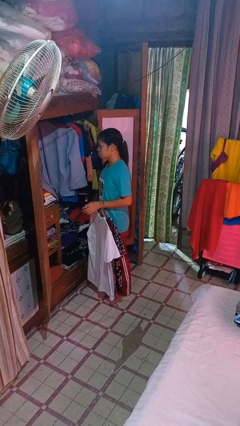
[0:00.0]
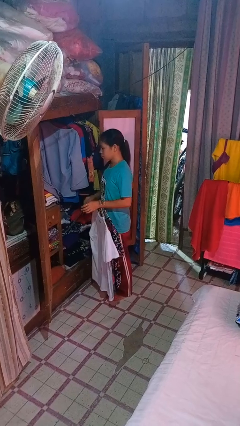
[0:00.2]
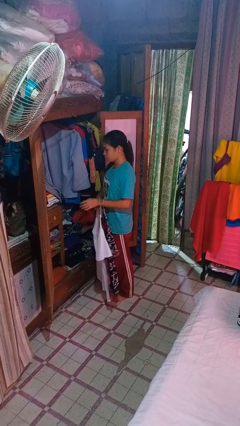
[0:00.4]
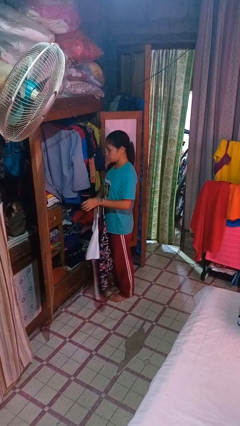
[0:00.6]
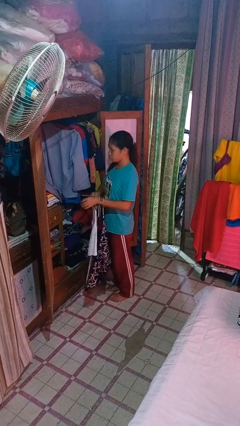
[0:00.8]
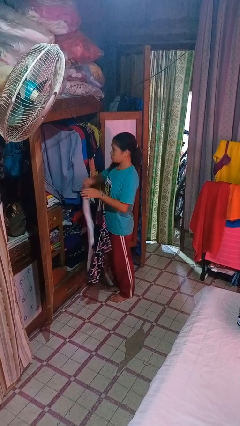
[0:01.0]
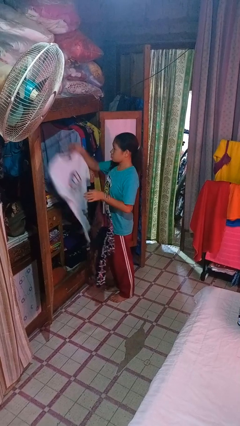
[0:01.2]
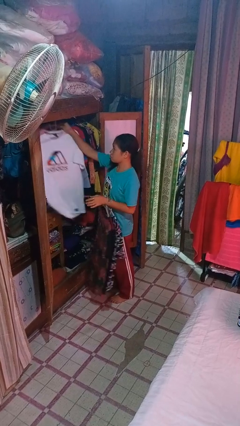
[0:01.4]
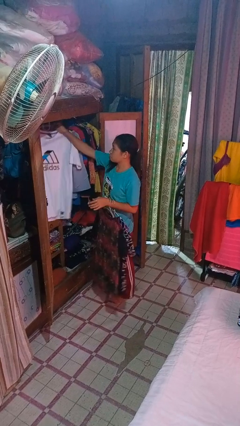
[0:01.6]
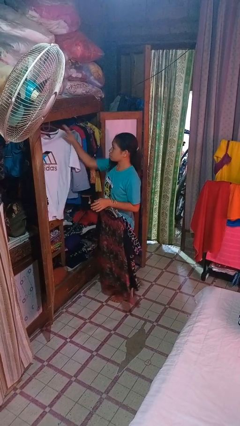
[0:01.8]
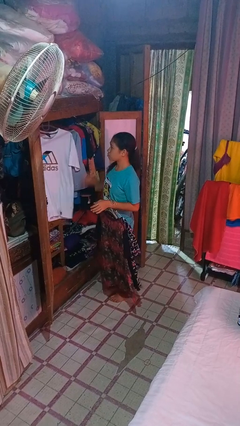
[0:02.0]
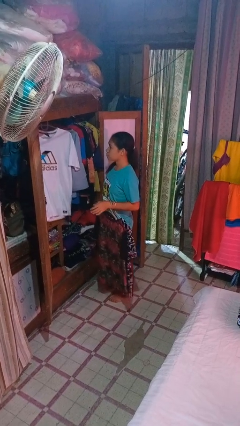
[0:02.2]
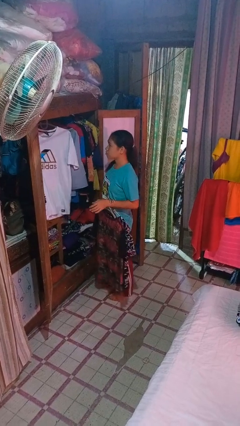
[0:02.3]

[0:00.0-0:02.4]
person puts clothes into closet

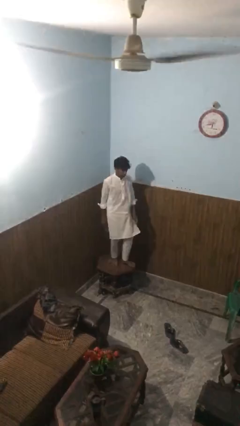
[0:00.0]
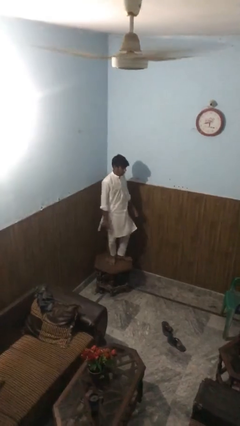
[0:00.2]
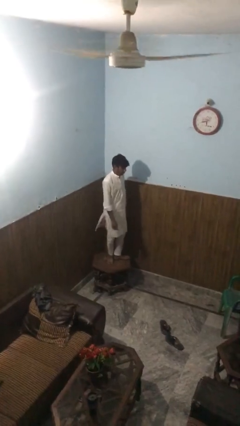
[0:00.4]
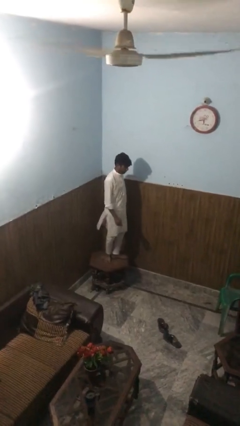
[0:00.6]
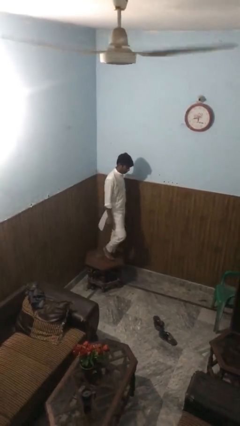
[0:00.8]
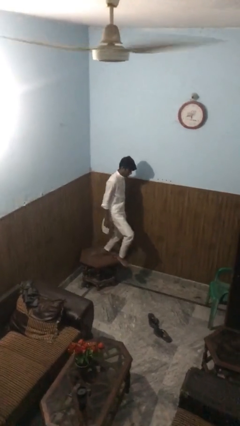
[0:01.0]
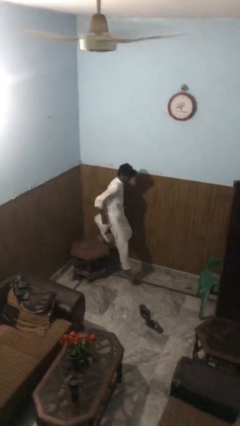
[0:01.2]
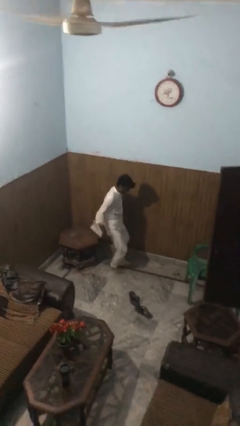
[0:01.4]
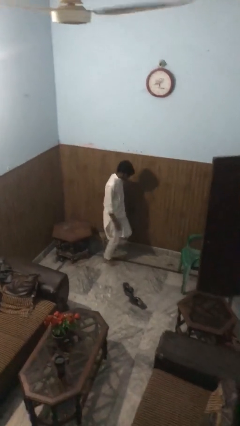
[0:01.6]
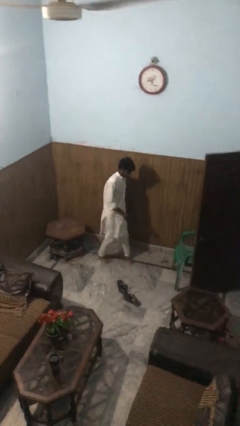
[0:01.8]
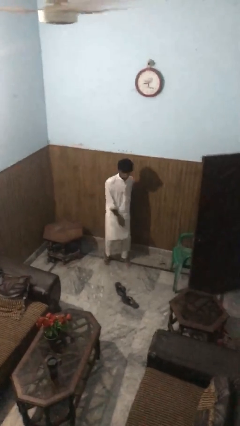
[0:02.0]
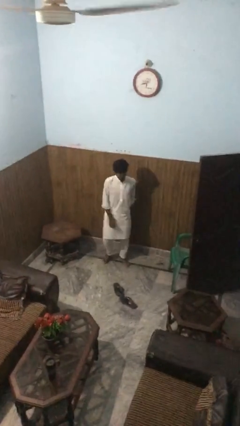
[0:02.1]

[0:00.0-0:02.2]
person climbs off table

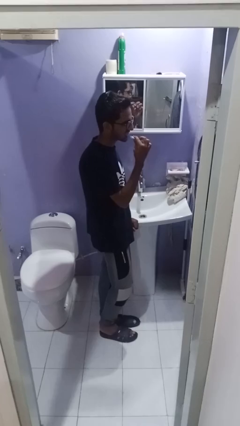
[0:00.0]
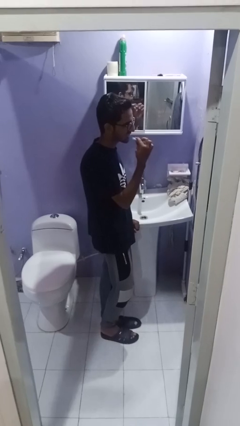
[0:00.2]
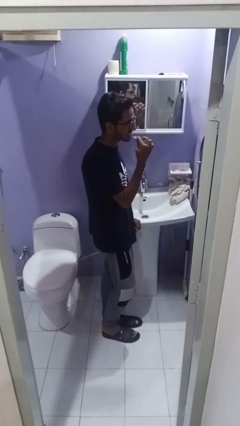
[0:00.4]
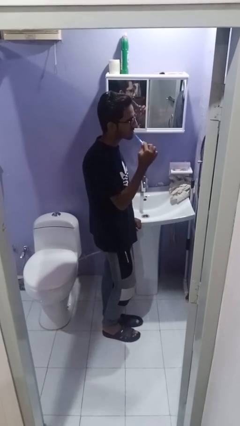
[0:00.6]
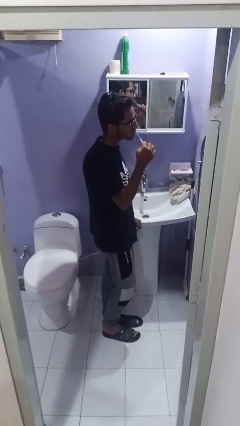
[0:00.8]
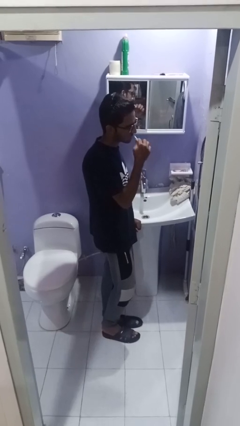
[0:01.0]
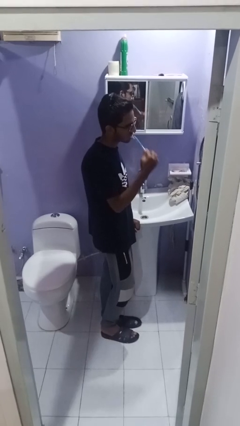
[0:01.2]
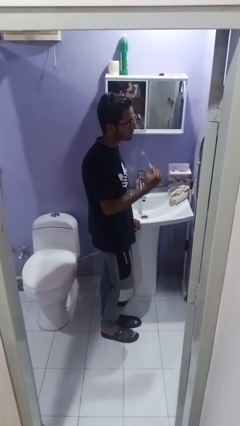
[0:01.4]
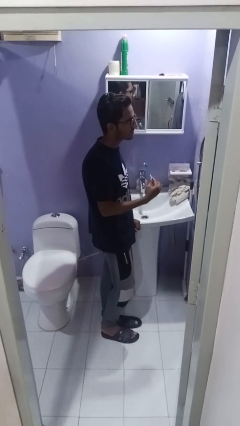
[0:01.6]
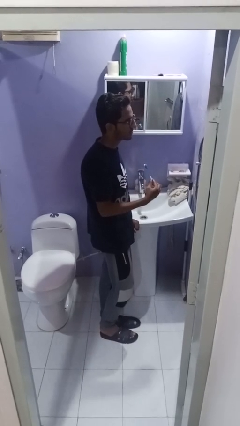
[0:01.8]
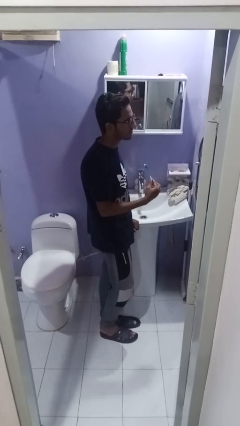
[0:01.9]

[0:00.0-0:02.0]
person brushes teeth

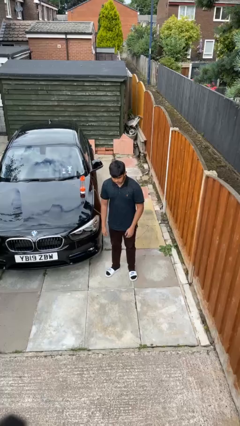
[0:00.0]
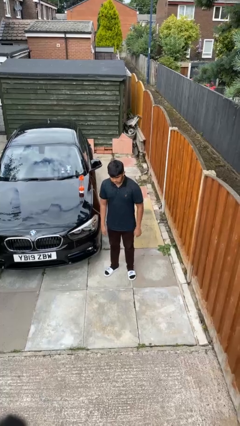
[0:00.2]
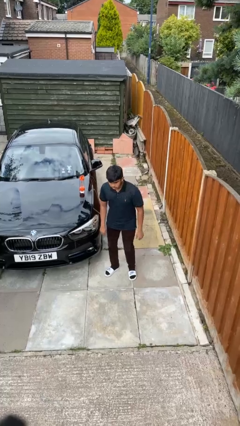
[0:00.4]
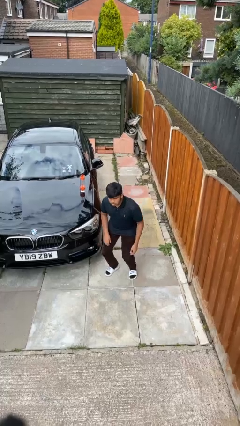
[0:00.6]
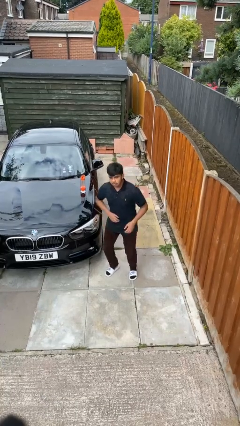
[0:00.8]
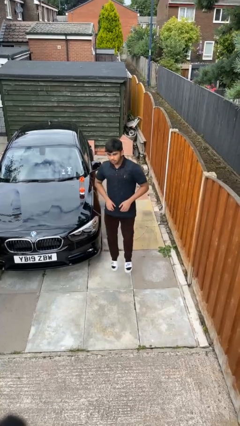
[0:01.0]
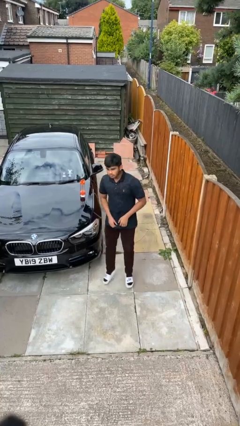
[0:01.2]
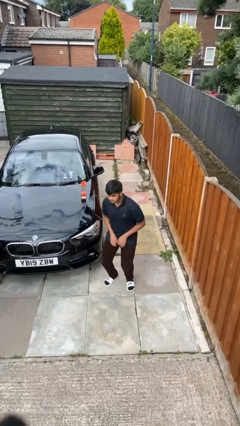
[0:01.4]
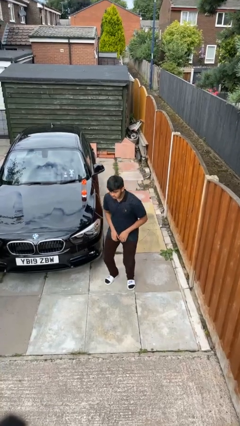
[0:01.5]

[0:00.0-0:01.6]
person jumps

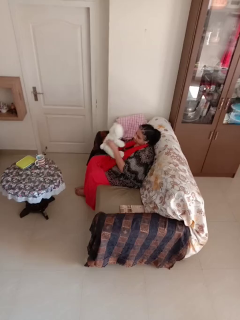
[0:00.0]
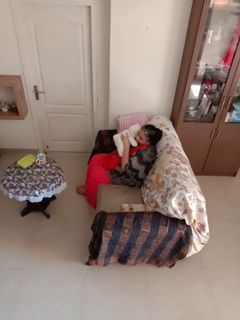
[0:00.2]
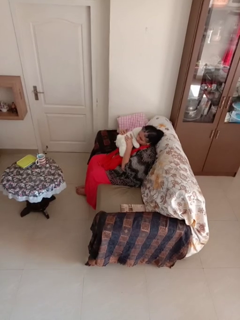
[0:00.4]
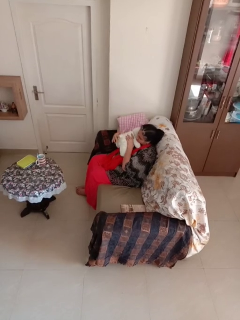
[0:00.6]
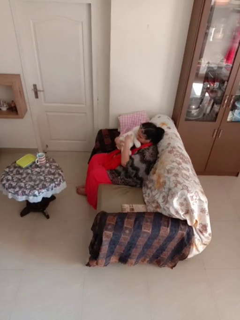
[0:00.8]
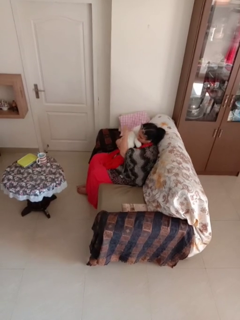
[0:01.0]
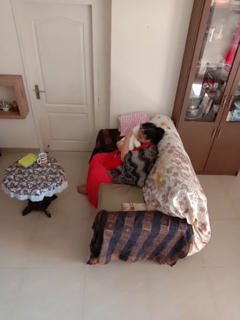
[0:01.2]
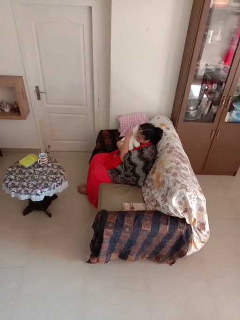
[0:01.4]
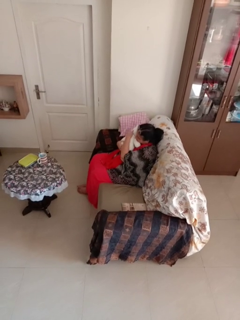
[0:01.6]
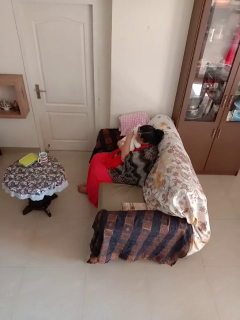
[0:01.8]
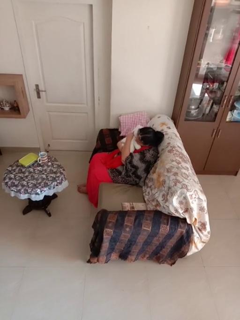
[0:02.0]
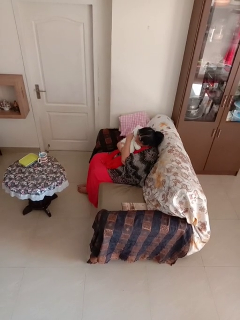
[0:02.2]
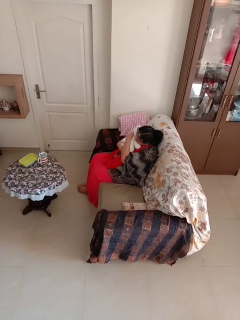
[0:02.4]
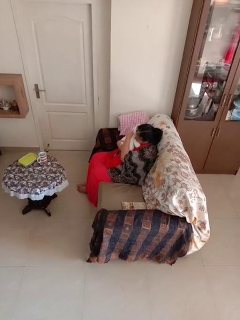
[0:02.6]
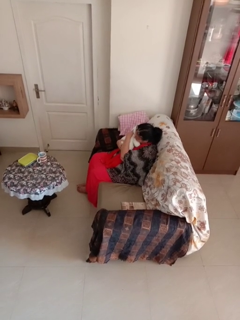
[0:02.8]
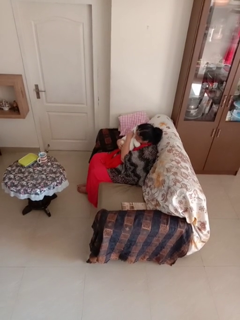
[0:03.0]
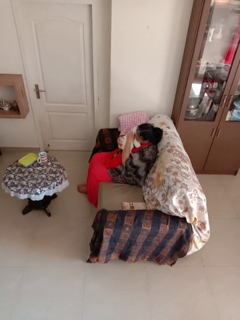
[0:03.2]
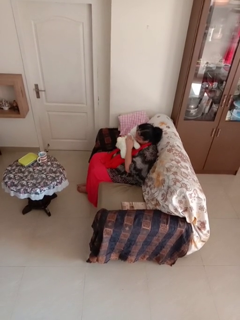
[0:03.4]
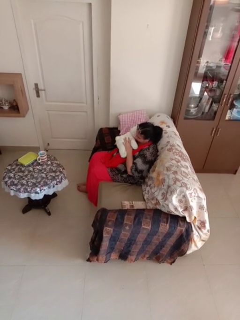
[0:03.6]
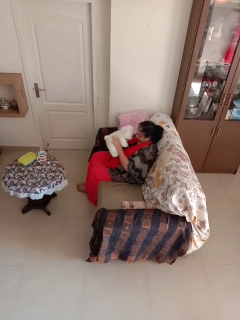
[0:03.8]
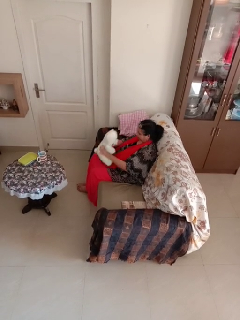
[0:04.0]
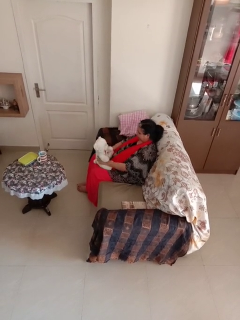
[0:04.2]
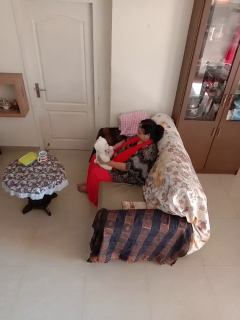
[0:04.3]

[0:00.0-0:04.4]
person hugs stuffed animal

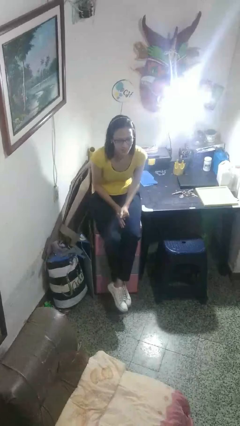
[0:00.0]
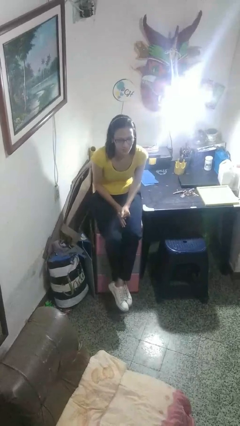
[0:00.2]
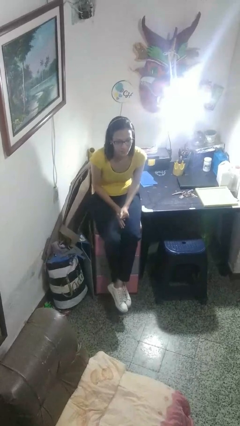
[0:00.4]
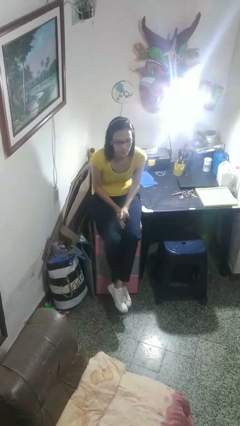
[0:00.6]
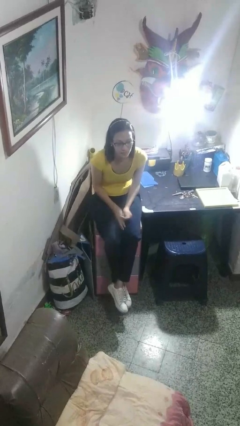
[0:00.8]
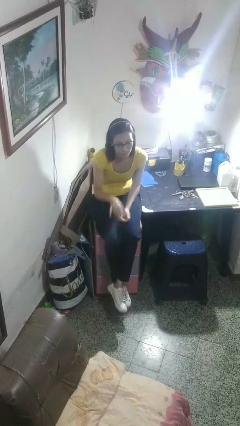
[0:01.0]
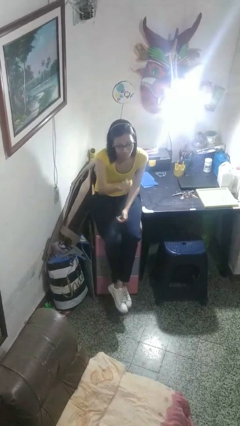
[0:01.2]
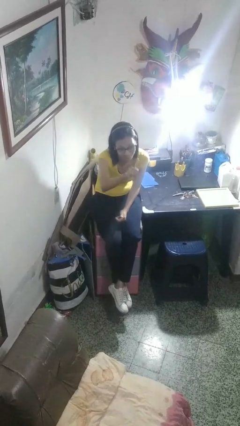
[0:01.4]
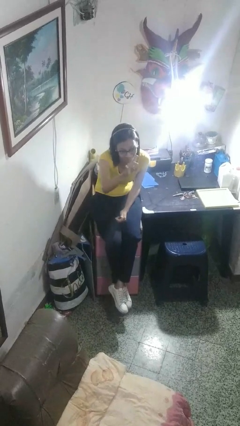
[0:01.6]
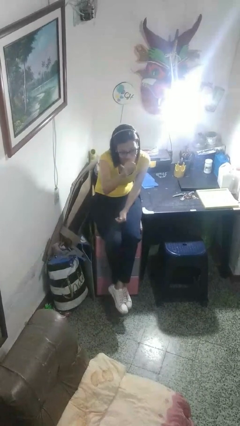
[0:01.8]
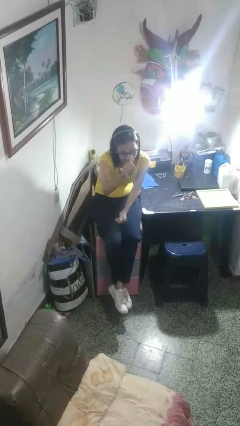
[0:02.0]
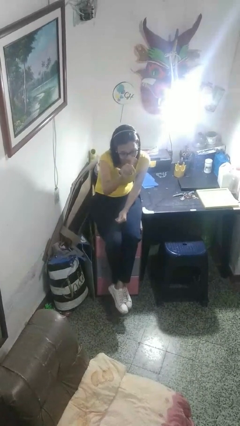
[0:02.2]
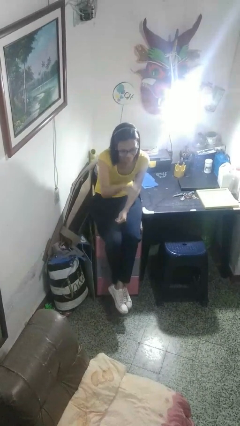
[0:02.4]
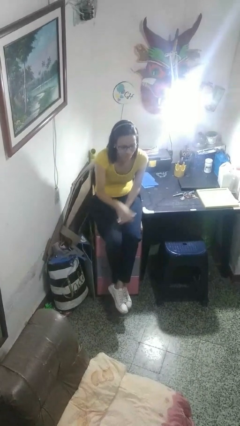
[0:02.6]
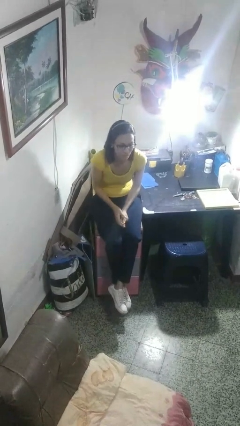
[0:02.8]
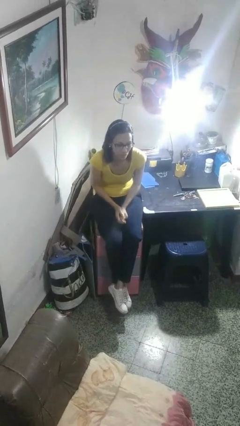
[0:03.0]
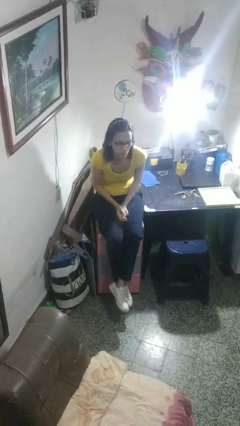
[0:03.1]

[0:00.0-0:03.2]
person gestures hang loose

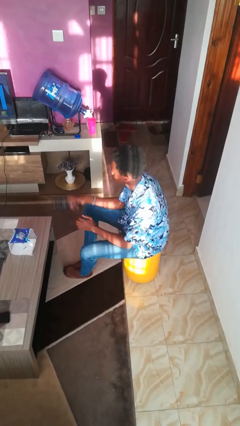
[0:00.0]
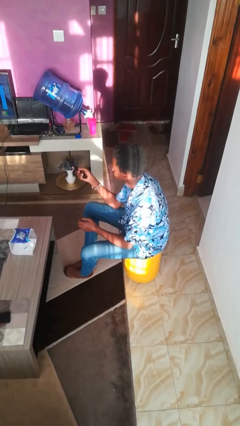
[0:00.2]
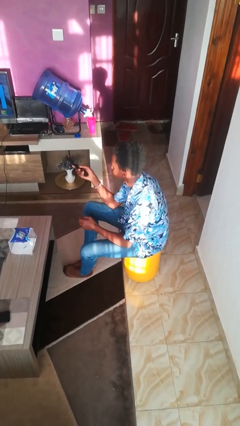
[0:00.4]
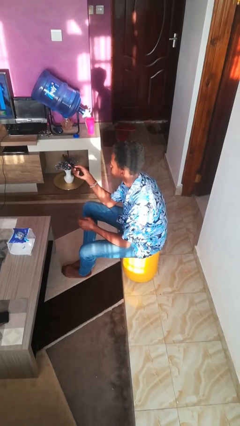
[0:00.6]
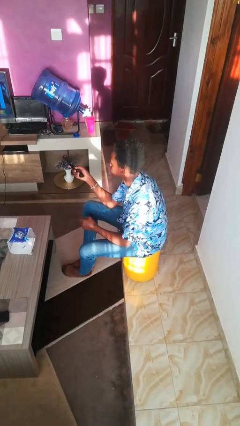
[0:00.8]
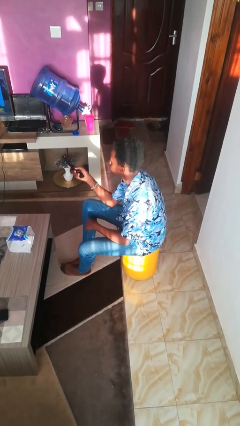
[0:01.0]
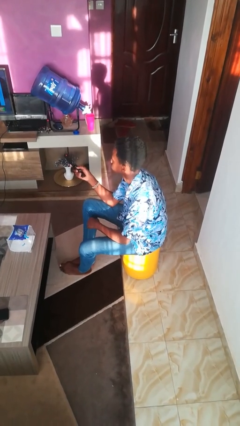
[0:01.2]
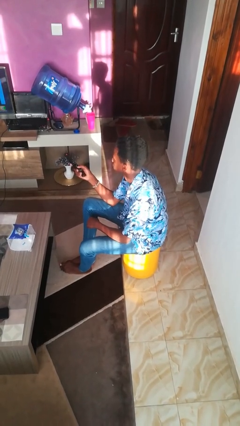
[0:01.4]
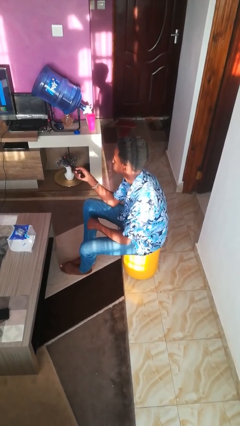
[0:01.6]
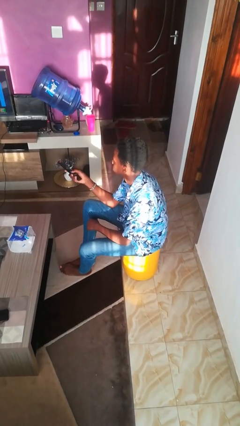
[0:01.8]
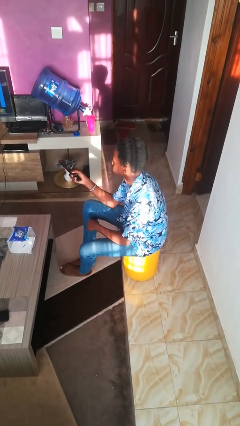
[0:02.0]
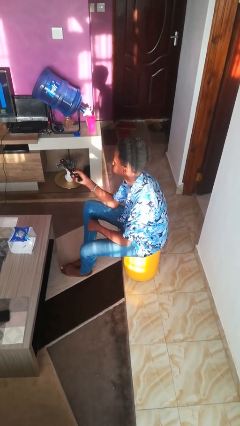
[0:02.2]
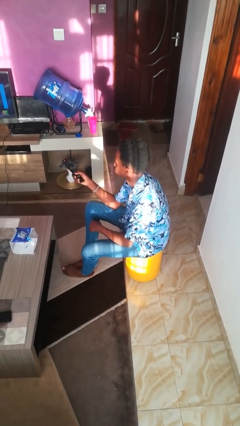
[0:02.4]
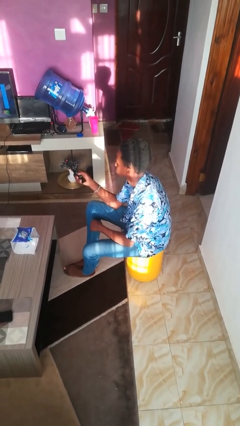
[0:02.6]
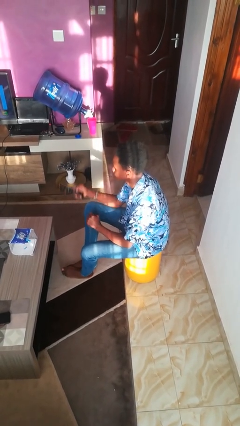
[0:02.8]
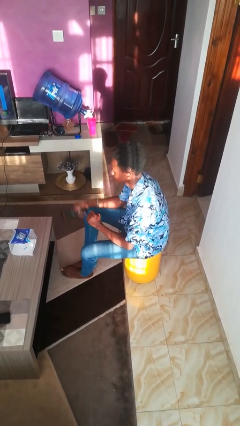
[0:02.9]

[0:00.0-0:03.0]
person uses television remote
